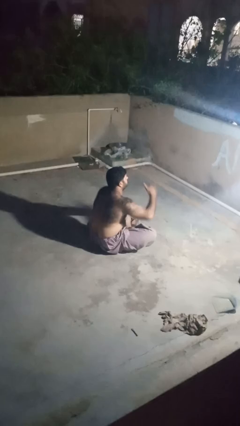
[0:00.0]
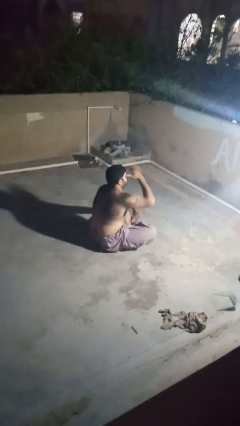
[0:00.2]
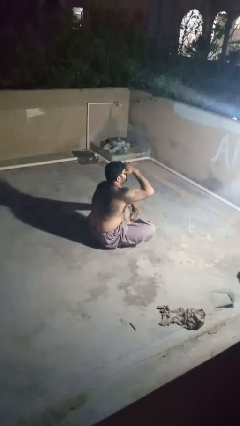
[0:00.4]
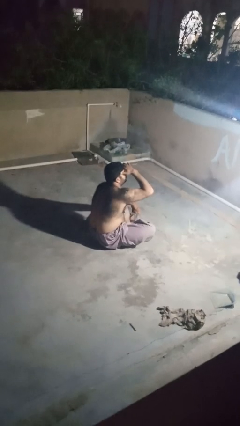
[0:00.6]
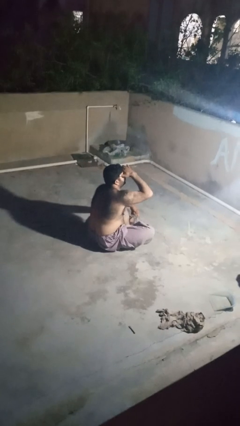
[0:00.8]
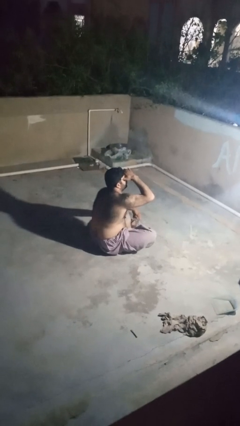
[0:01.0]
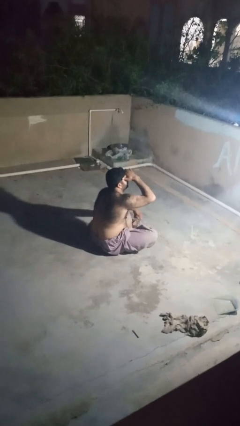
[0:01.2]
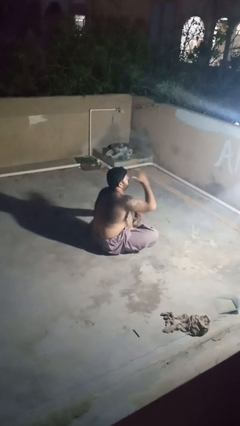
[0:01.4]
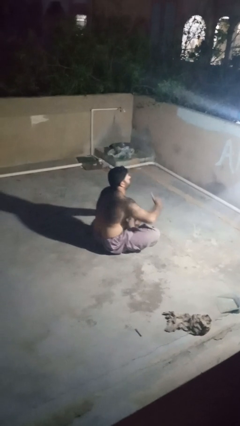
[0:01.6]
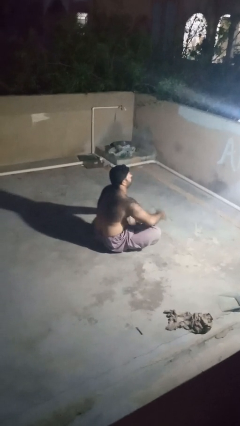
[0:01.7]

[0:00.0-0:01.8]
person shades eyes

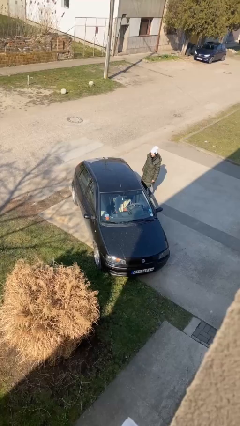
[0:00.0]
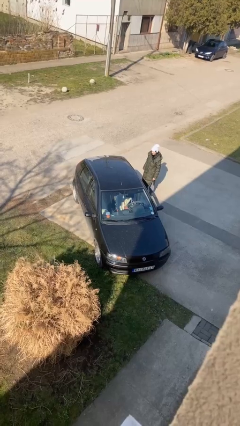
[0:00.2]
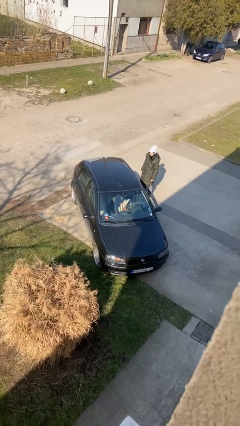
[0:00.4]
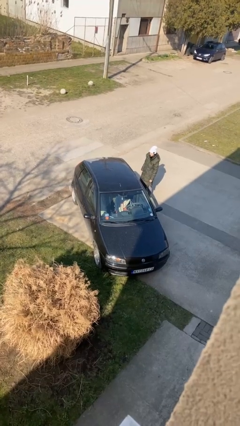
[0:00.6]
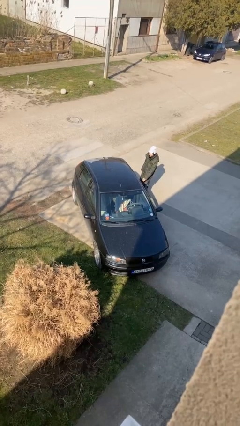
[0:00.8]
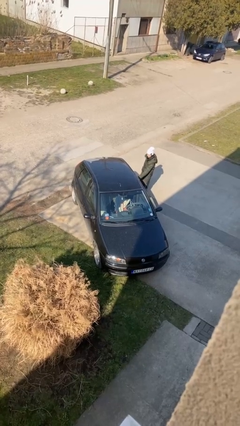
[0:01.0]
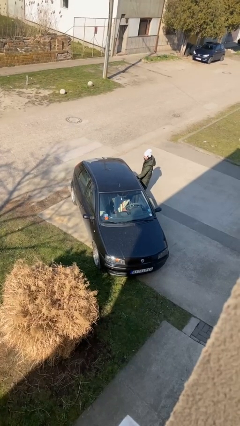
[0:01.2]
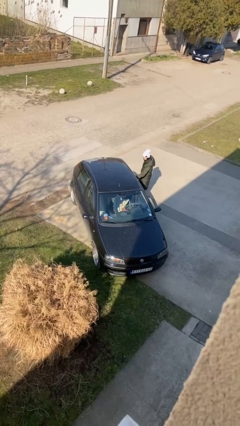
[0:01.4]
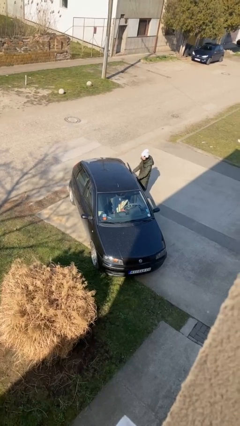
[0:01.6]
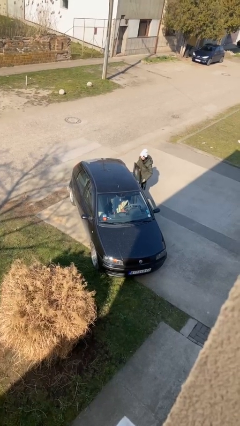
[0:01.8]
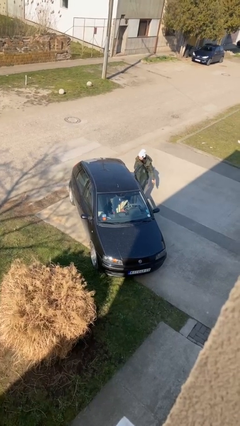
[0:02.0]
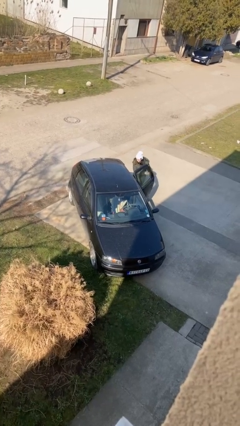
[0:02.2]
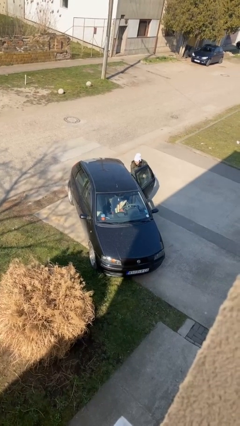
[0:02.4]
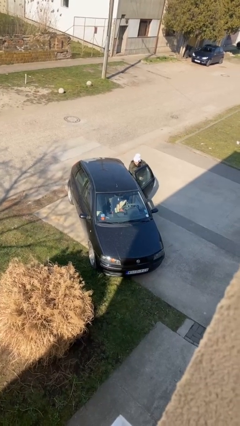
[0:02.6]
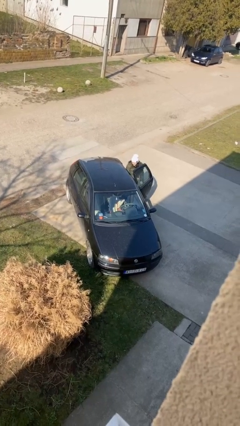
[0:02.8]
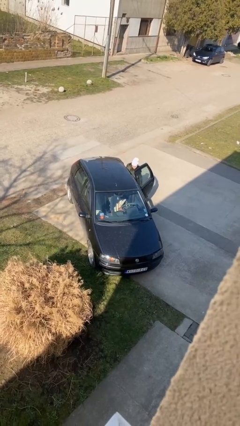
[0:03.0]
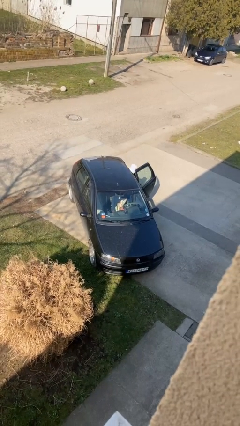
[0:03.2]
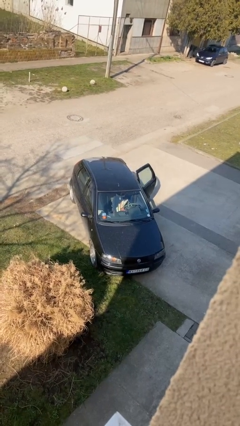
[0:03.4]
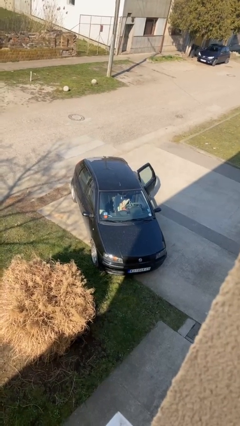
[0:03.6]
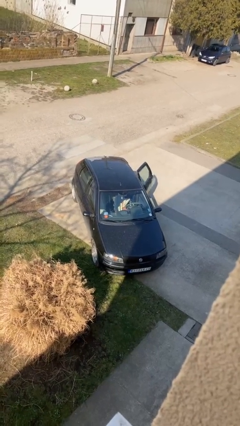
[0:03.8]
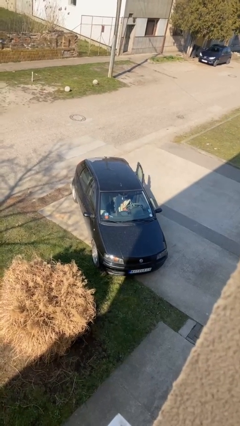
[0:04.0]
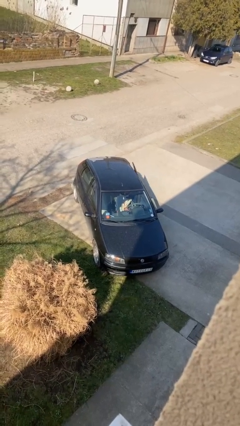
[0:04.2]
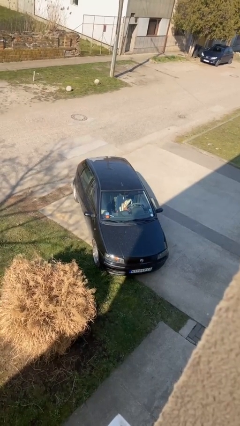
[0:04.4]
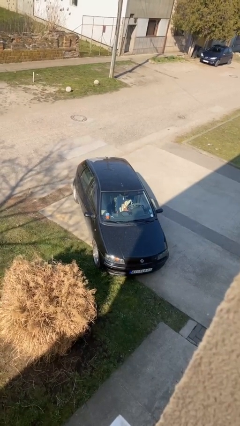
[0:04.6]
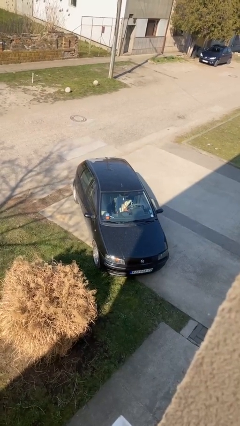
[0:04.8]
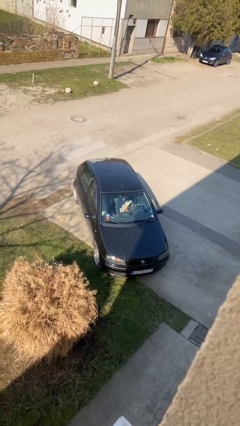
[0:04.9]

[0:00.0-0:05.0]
car picks up person

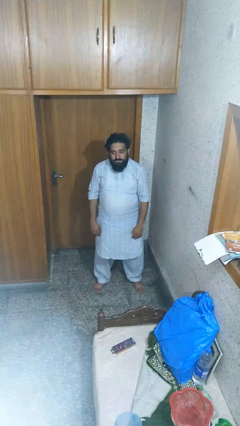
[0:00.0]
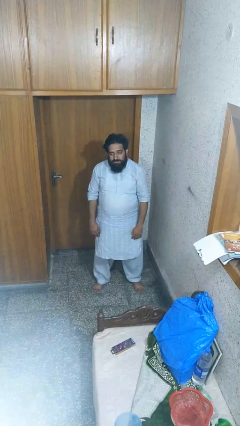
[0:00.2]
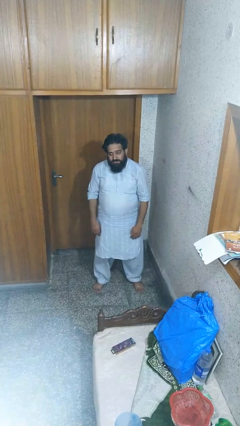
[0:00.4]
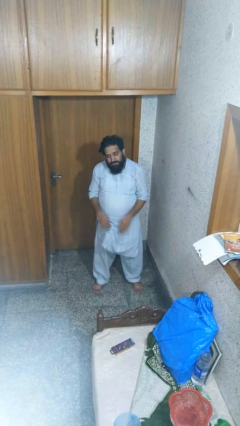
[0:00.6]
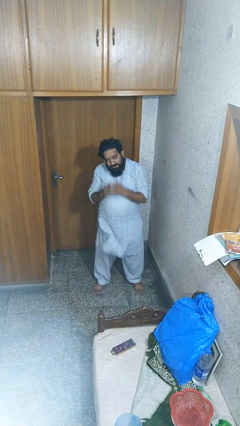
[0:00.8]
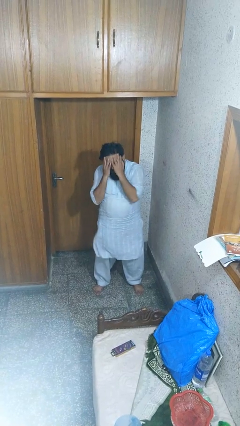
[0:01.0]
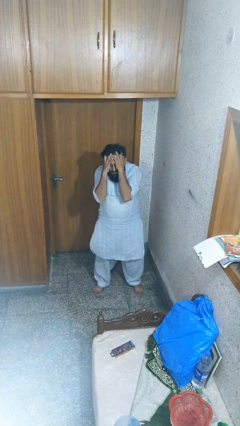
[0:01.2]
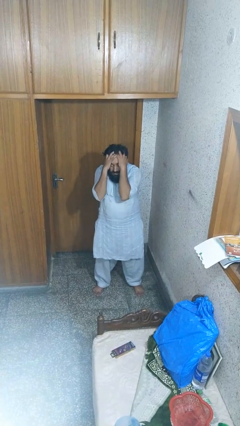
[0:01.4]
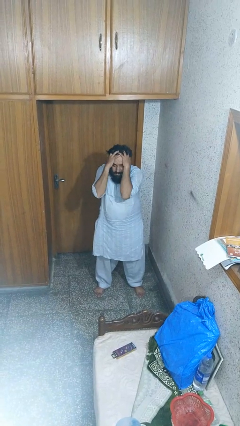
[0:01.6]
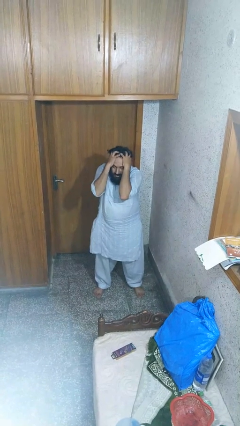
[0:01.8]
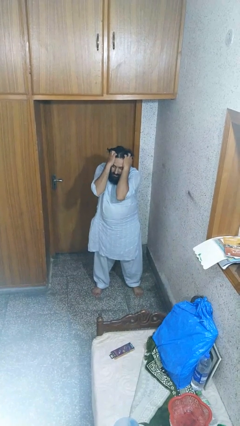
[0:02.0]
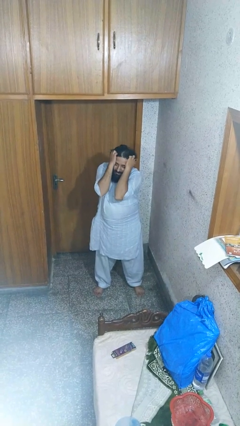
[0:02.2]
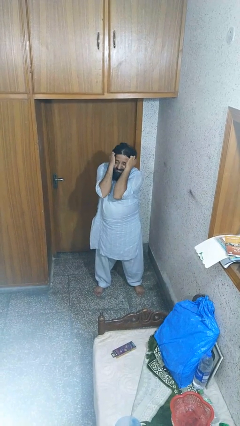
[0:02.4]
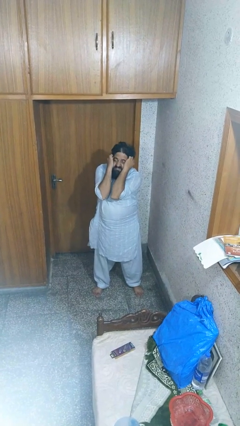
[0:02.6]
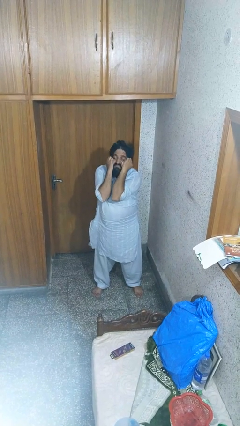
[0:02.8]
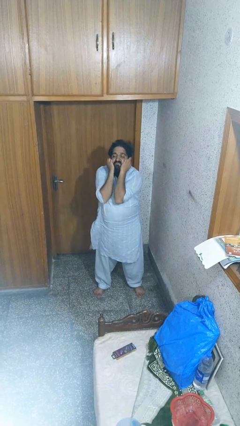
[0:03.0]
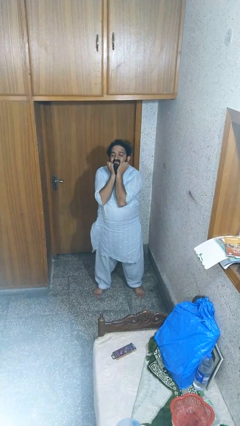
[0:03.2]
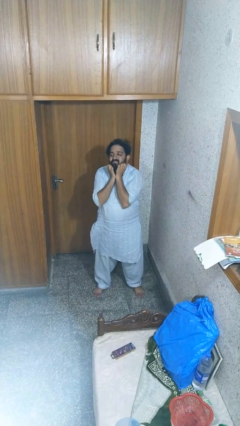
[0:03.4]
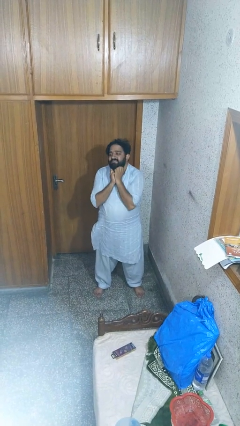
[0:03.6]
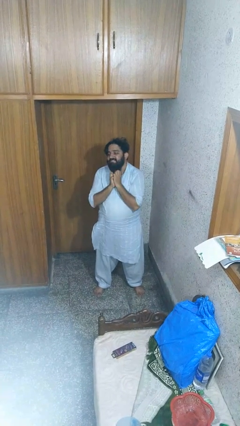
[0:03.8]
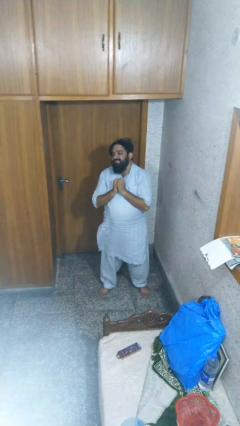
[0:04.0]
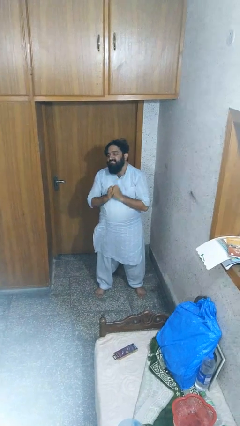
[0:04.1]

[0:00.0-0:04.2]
person scratches face

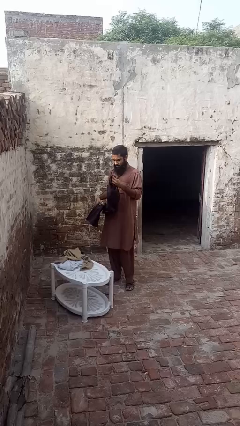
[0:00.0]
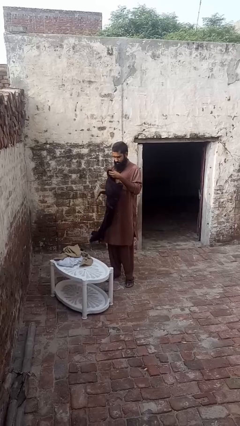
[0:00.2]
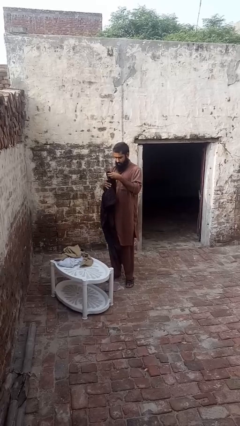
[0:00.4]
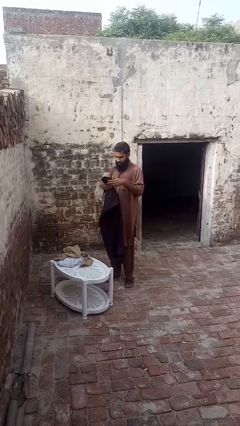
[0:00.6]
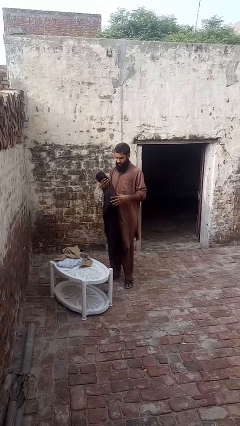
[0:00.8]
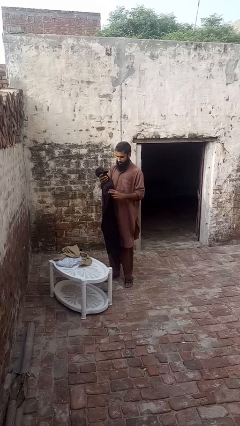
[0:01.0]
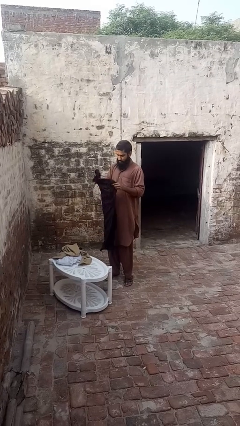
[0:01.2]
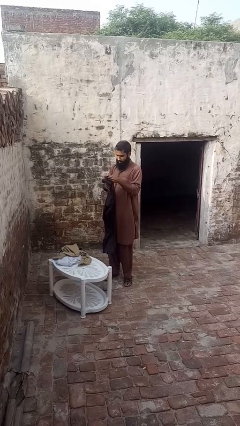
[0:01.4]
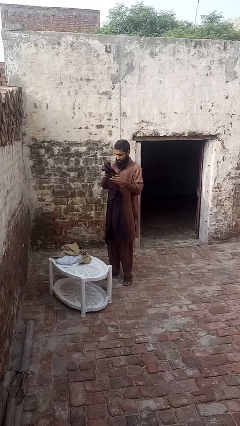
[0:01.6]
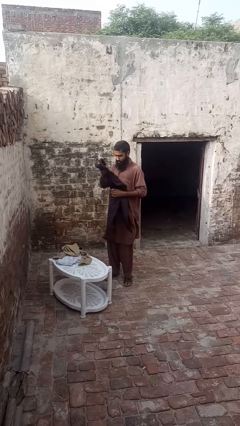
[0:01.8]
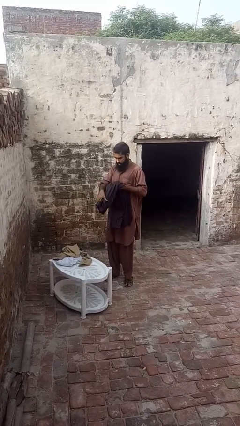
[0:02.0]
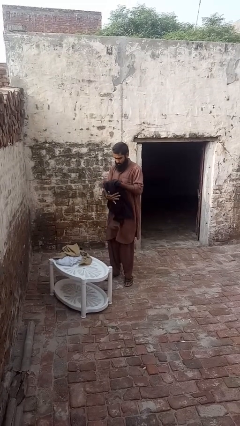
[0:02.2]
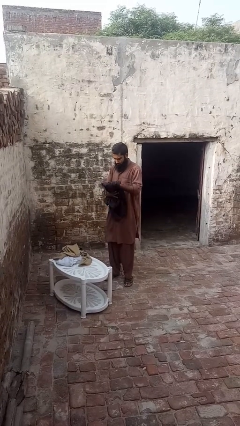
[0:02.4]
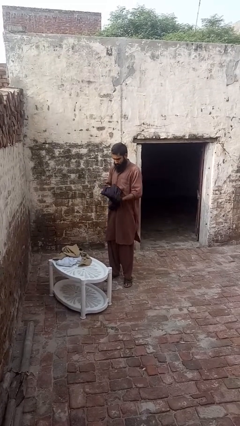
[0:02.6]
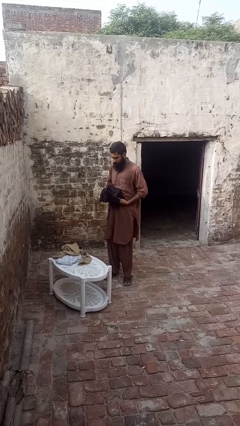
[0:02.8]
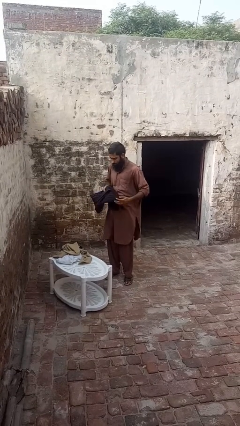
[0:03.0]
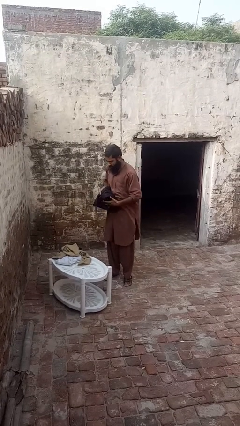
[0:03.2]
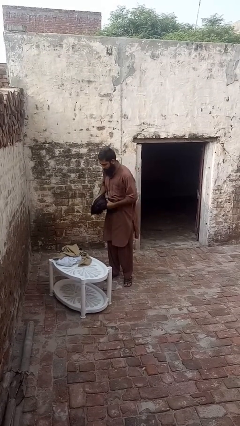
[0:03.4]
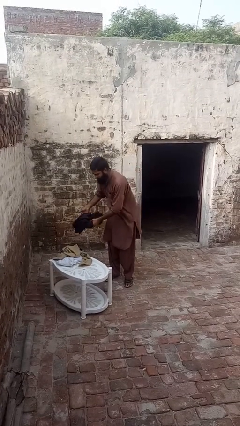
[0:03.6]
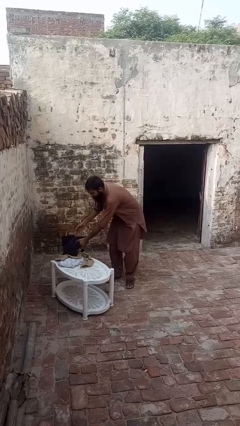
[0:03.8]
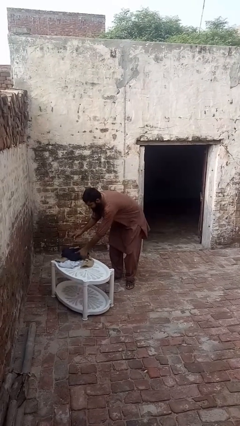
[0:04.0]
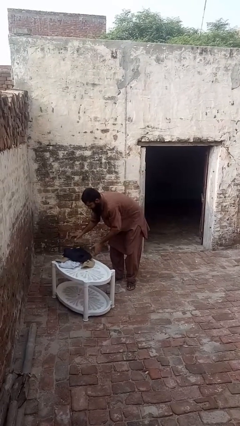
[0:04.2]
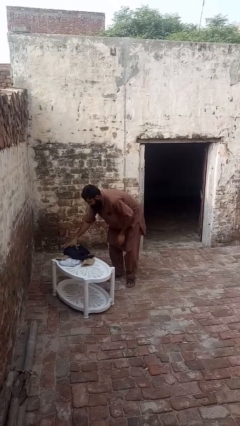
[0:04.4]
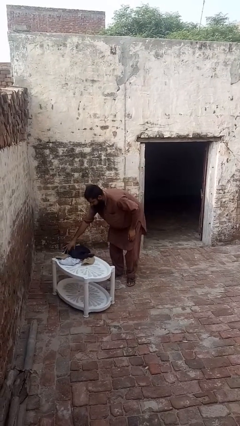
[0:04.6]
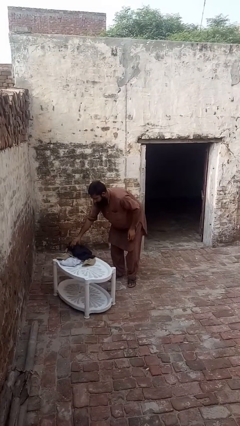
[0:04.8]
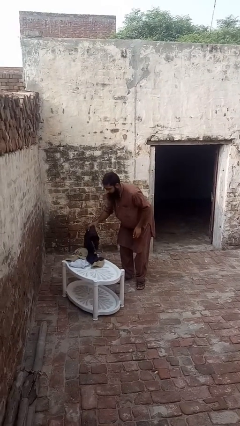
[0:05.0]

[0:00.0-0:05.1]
person folds pants

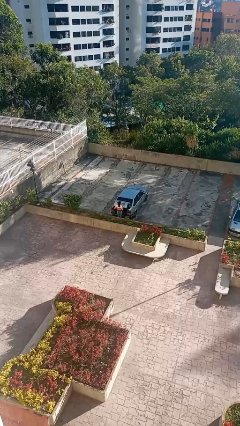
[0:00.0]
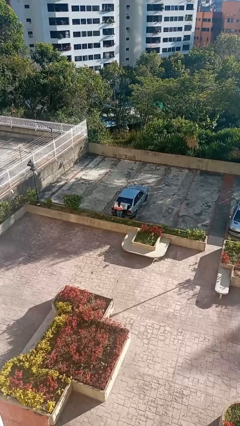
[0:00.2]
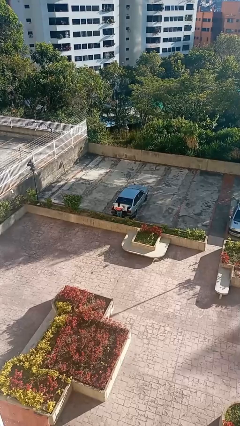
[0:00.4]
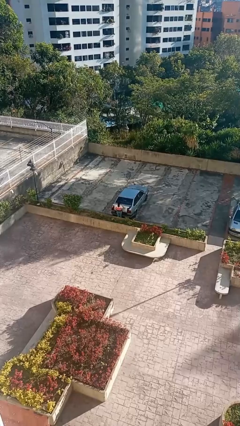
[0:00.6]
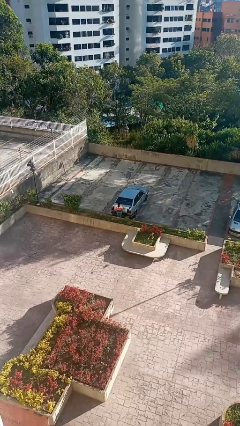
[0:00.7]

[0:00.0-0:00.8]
person closes car trunk

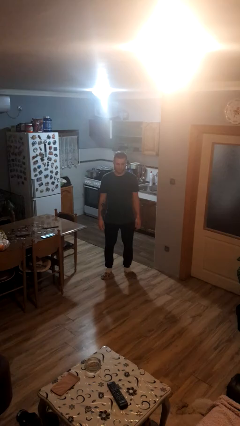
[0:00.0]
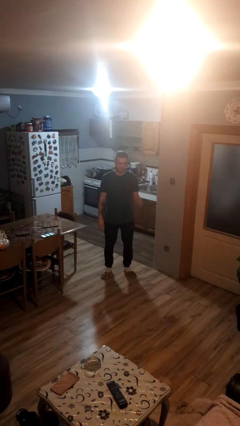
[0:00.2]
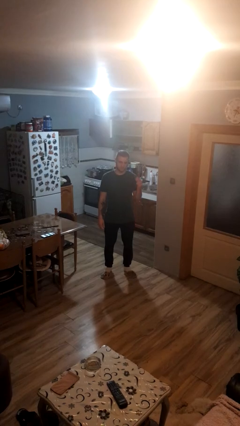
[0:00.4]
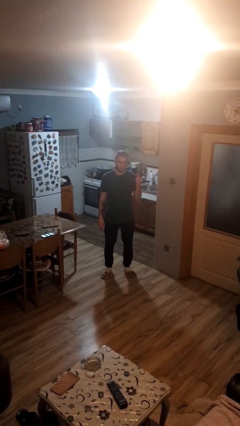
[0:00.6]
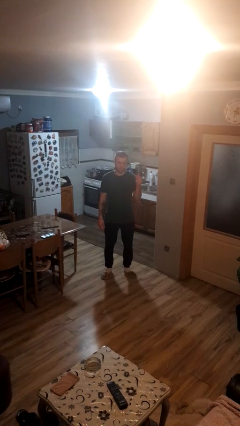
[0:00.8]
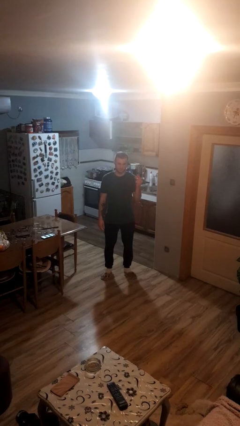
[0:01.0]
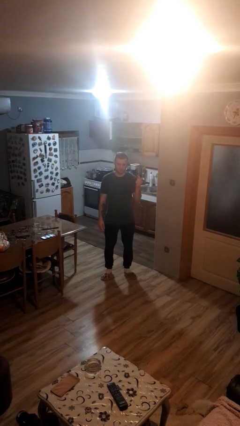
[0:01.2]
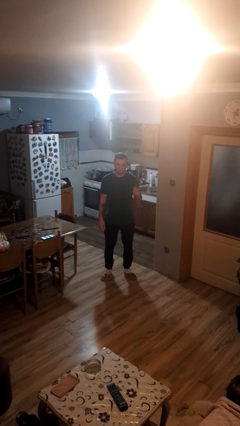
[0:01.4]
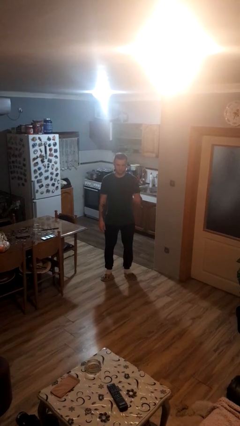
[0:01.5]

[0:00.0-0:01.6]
person snaps fingers
